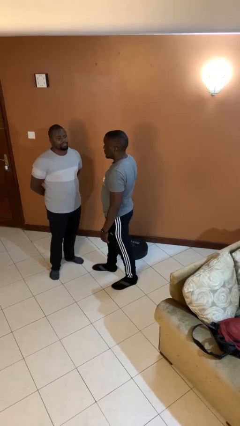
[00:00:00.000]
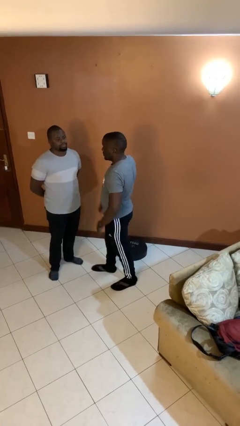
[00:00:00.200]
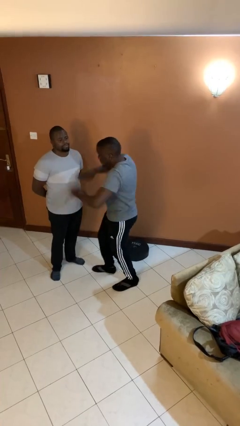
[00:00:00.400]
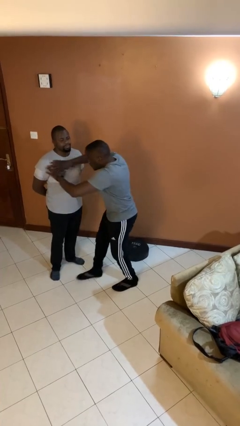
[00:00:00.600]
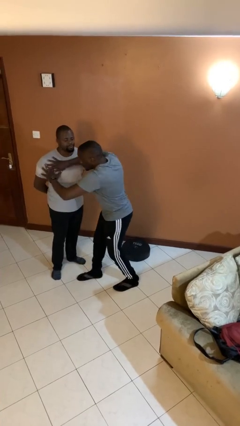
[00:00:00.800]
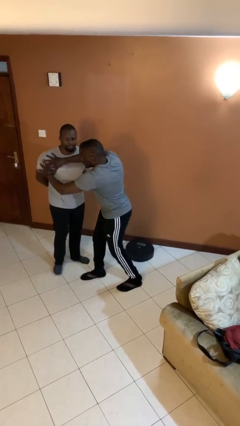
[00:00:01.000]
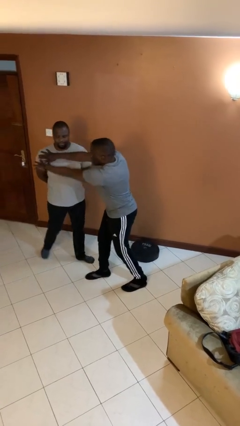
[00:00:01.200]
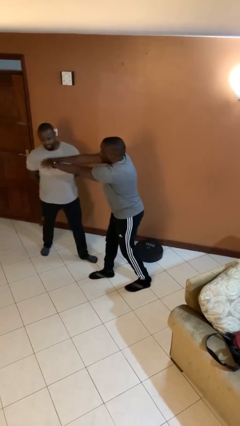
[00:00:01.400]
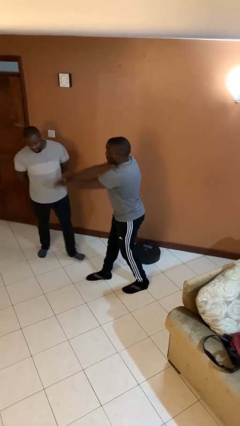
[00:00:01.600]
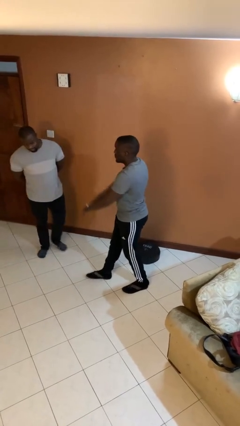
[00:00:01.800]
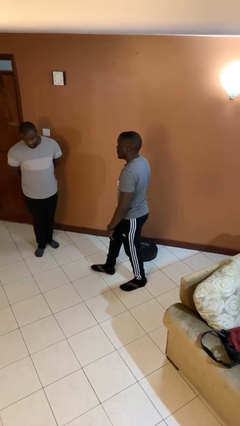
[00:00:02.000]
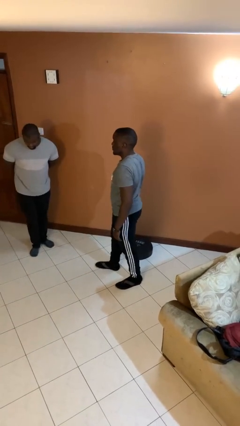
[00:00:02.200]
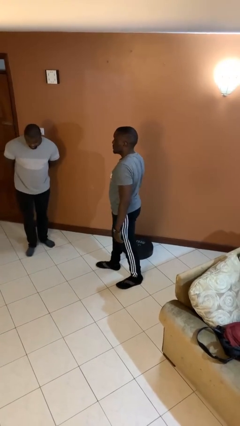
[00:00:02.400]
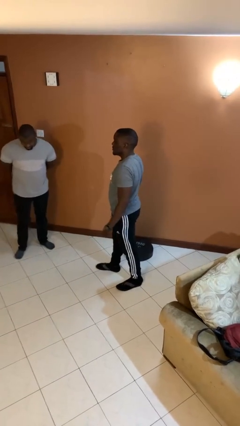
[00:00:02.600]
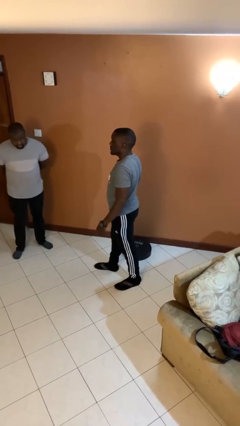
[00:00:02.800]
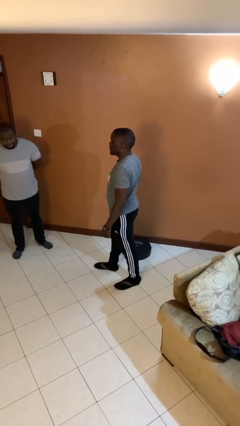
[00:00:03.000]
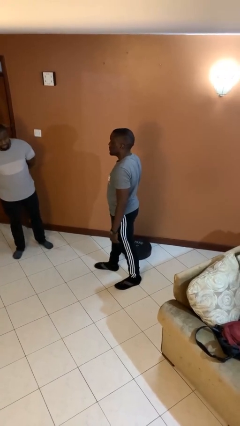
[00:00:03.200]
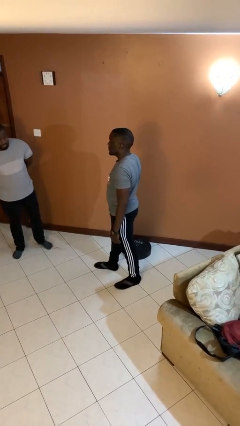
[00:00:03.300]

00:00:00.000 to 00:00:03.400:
person shoves person

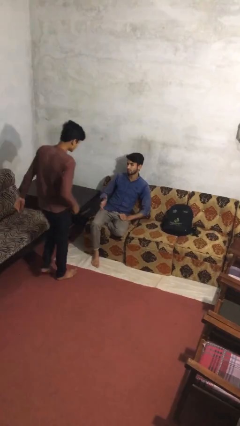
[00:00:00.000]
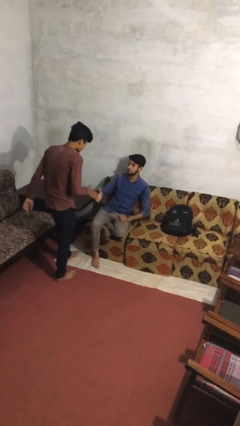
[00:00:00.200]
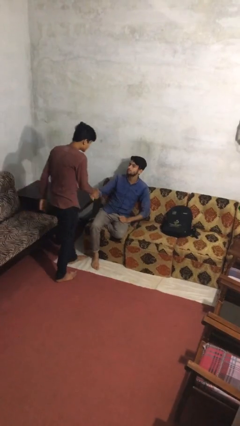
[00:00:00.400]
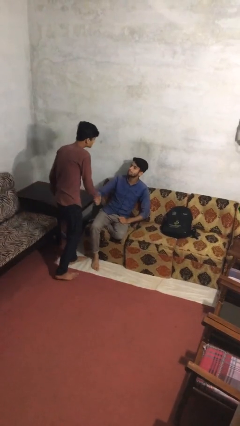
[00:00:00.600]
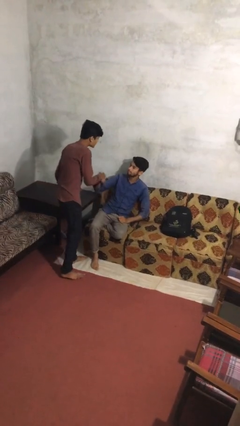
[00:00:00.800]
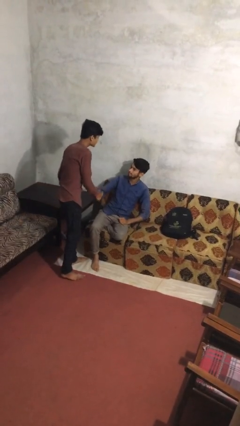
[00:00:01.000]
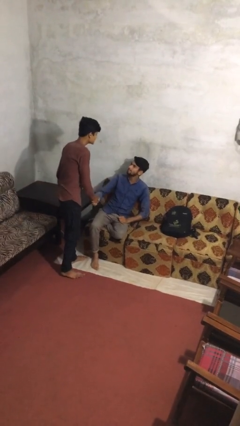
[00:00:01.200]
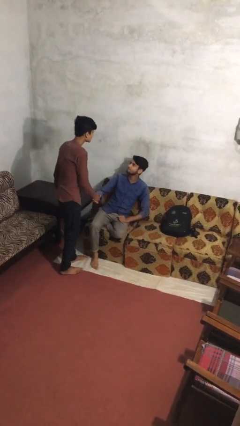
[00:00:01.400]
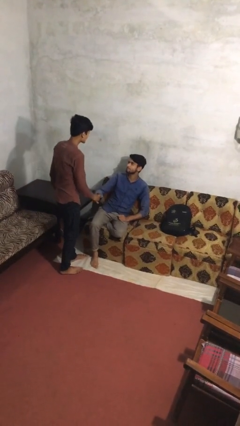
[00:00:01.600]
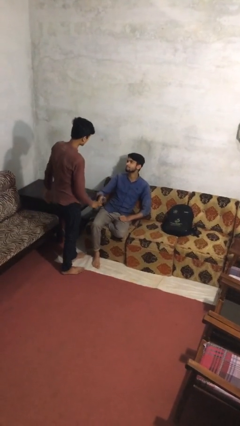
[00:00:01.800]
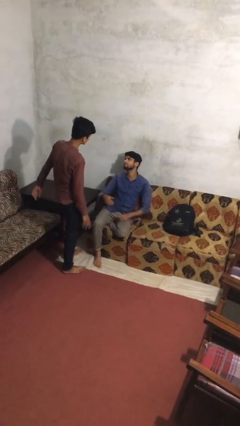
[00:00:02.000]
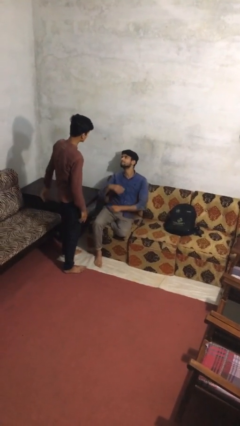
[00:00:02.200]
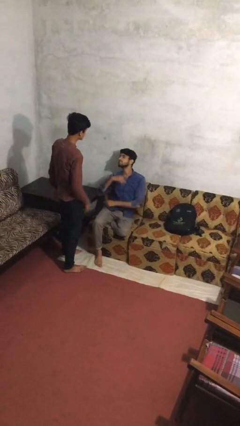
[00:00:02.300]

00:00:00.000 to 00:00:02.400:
person shakes hand

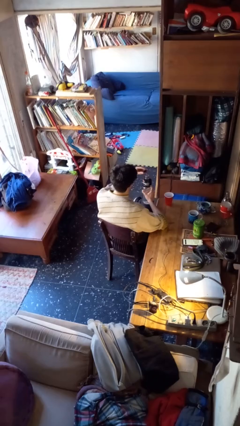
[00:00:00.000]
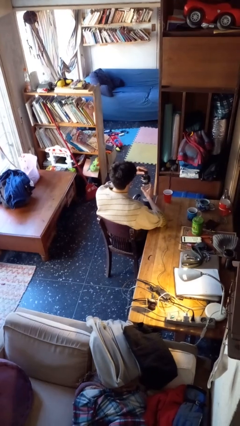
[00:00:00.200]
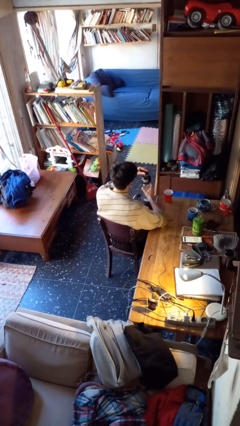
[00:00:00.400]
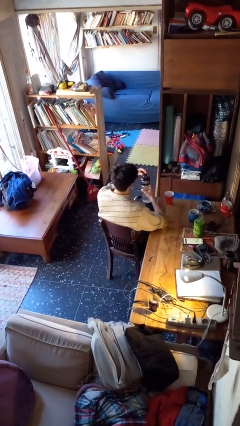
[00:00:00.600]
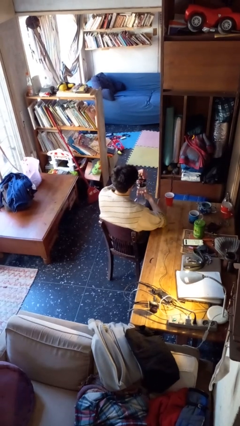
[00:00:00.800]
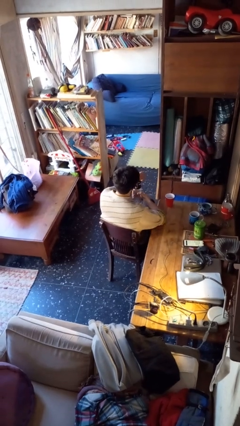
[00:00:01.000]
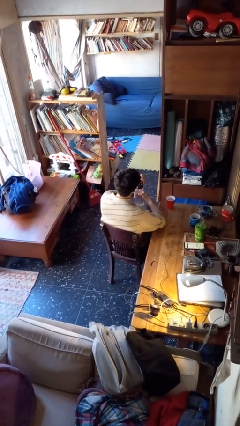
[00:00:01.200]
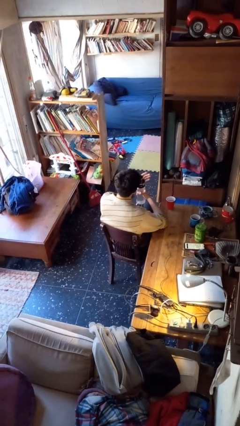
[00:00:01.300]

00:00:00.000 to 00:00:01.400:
person screws lid to bottle

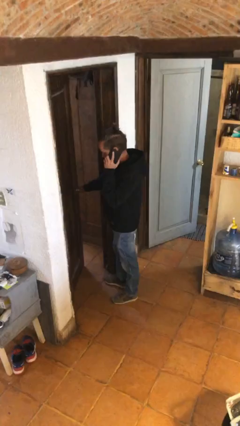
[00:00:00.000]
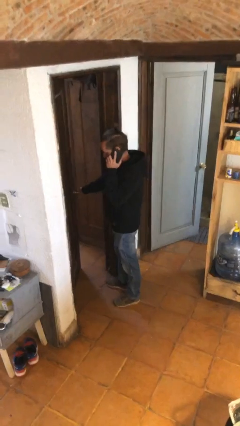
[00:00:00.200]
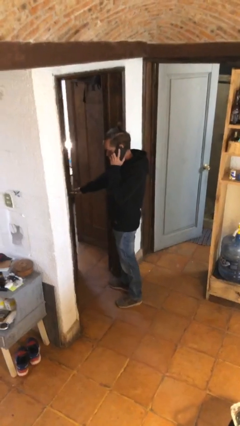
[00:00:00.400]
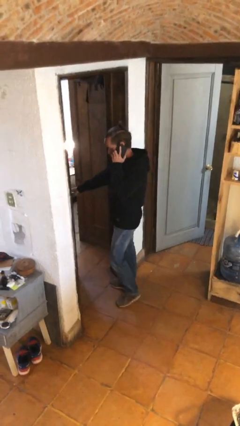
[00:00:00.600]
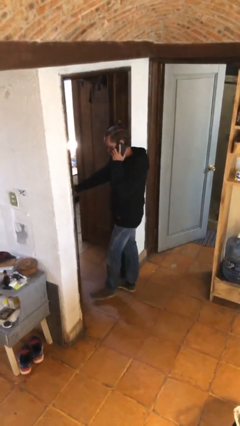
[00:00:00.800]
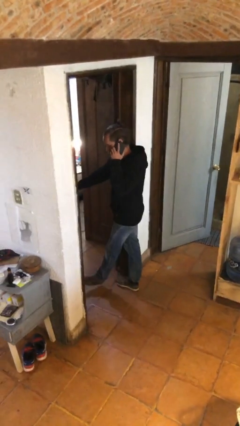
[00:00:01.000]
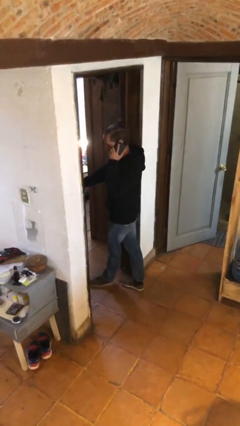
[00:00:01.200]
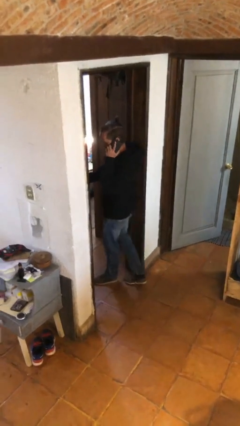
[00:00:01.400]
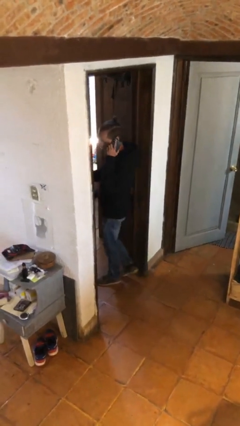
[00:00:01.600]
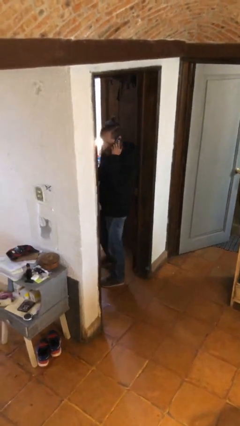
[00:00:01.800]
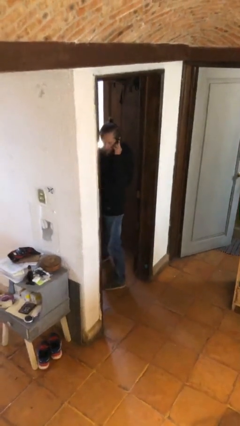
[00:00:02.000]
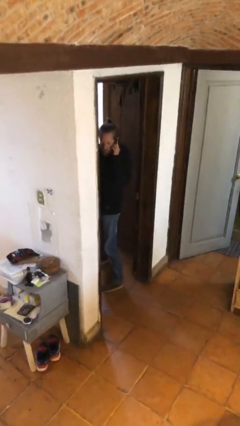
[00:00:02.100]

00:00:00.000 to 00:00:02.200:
person exits scene through structure

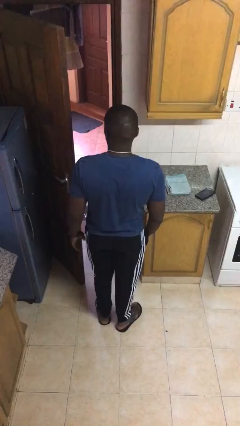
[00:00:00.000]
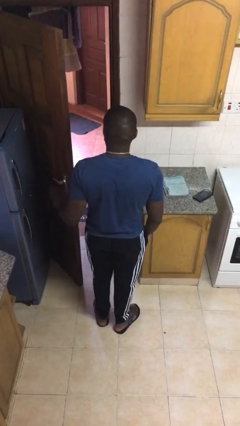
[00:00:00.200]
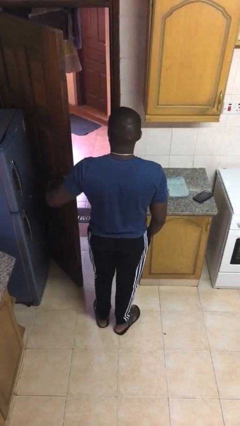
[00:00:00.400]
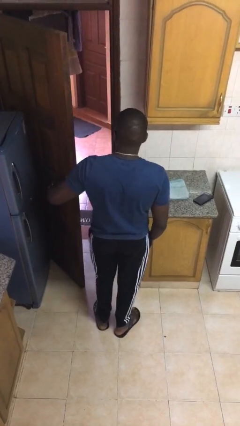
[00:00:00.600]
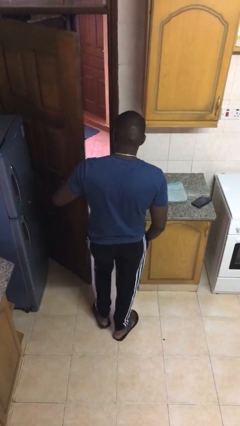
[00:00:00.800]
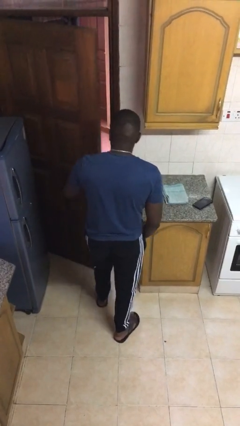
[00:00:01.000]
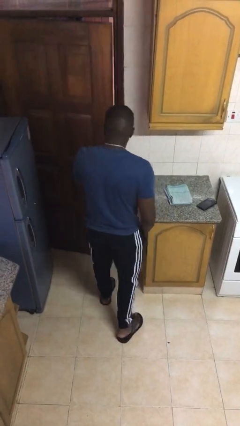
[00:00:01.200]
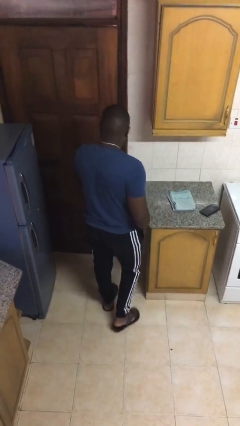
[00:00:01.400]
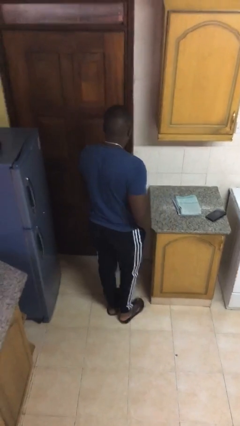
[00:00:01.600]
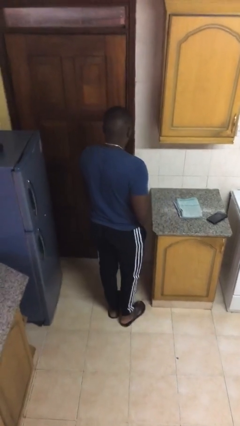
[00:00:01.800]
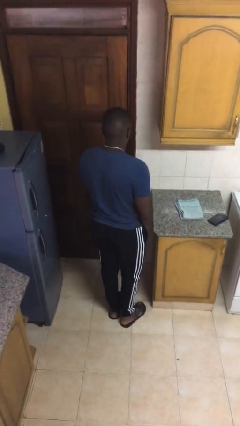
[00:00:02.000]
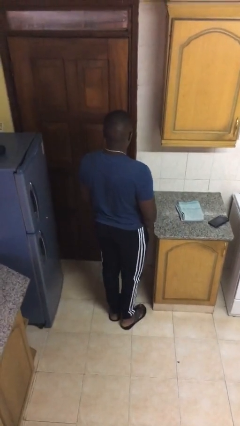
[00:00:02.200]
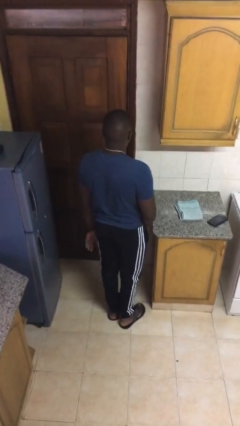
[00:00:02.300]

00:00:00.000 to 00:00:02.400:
person closes facility door

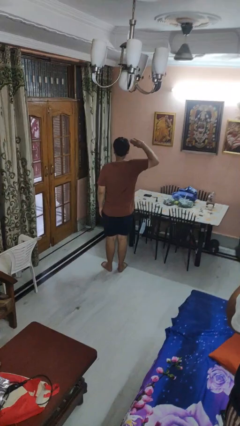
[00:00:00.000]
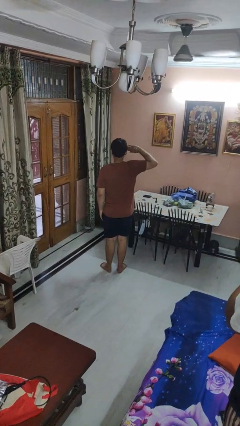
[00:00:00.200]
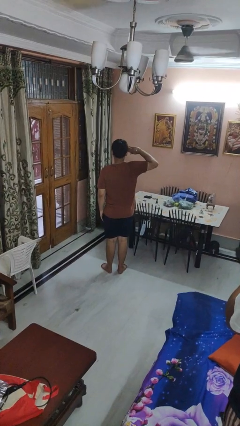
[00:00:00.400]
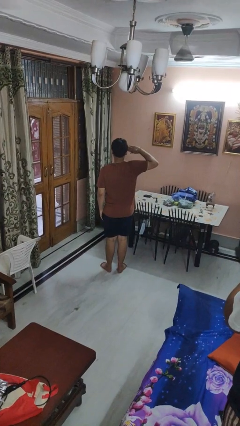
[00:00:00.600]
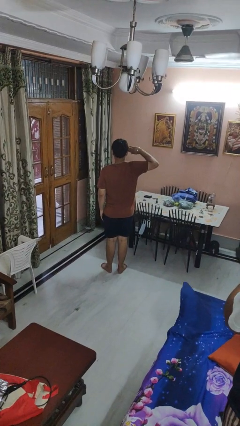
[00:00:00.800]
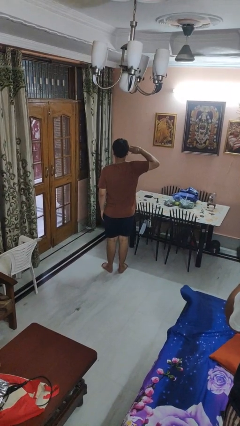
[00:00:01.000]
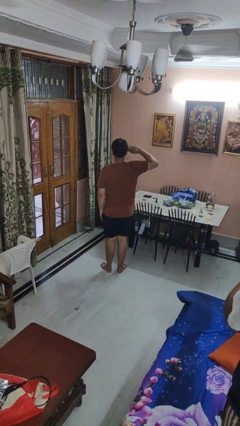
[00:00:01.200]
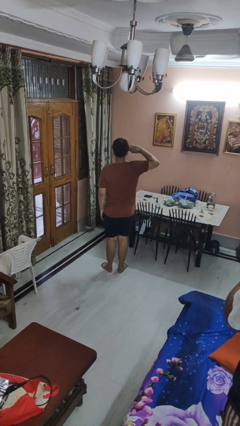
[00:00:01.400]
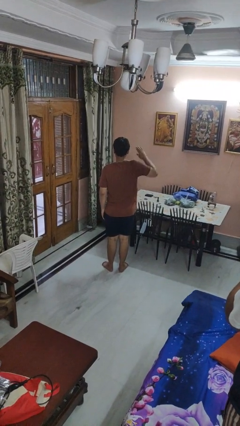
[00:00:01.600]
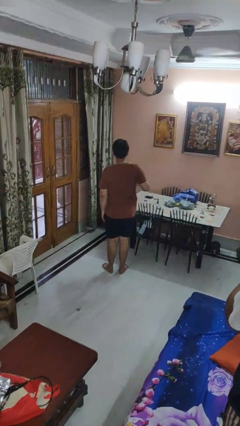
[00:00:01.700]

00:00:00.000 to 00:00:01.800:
person salutes

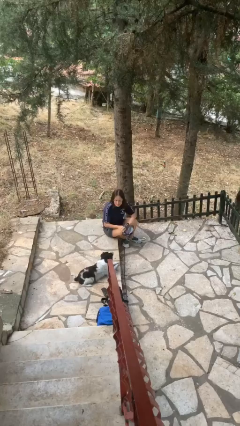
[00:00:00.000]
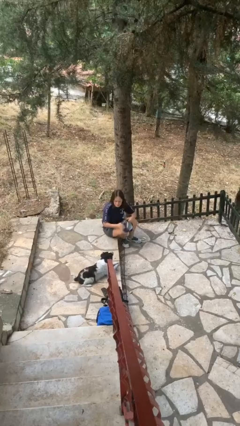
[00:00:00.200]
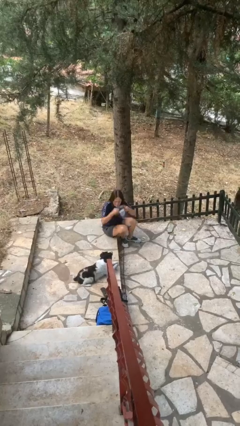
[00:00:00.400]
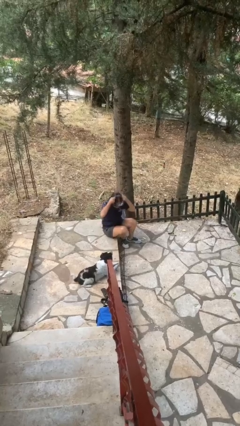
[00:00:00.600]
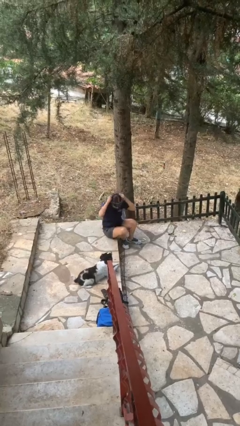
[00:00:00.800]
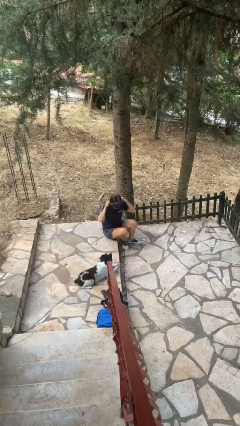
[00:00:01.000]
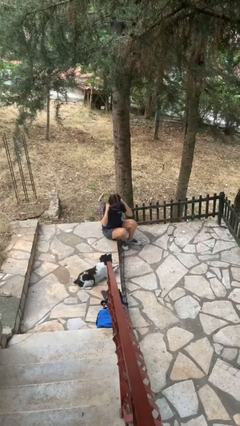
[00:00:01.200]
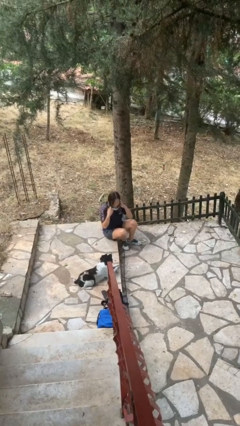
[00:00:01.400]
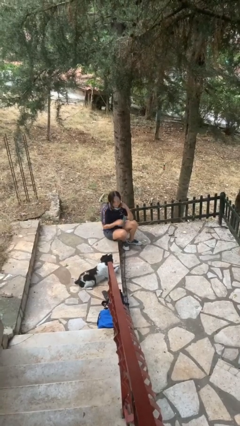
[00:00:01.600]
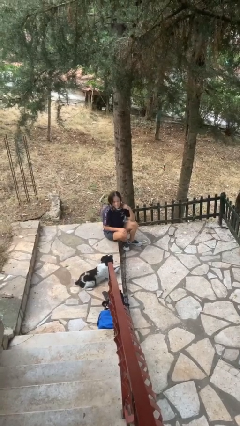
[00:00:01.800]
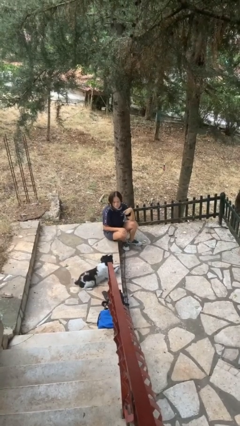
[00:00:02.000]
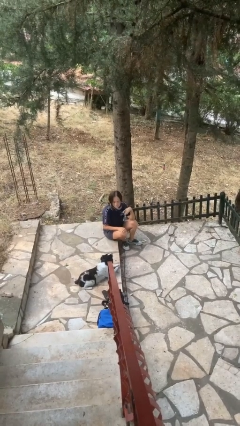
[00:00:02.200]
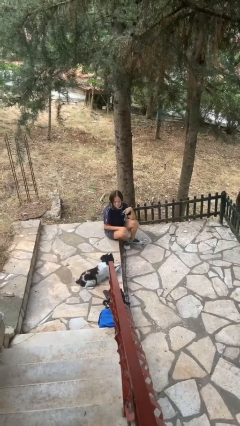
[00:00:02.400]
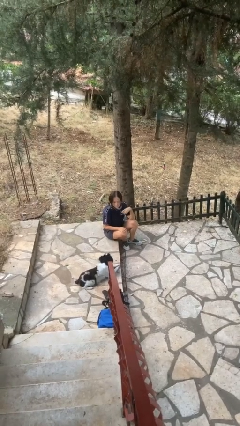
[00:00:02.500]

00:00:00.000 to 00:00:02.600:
person puts on scarf

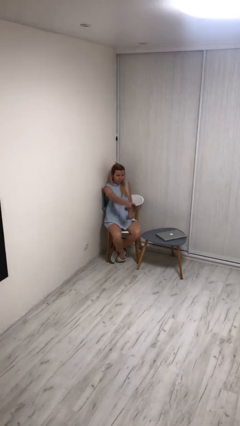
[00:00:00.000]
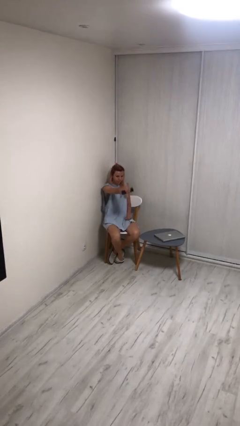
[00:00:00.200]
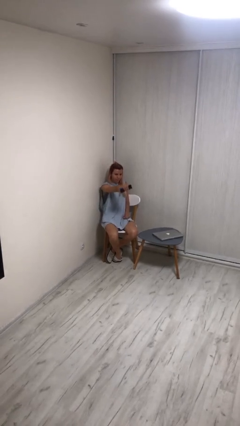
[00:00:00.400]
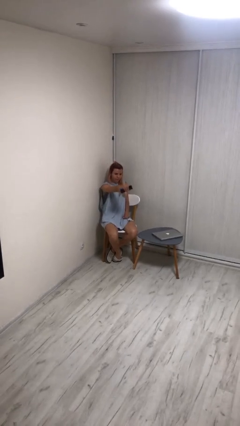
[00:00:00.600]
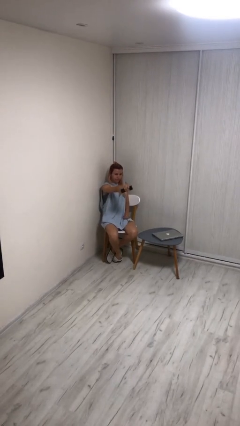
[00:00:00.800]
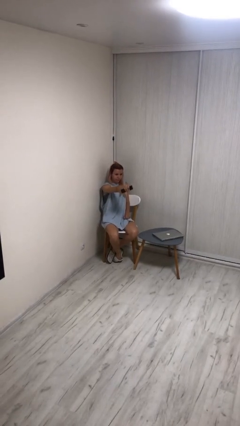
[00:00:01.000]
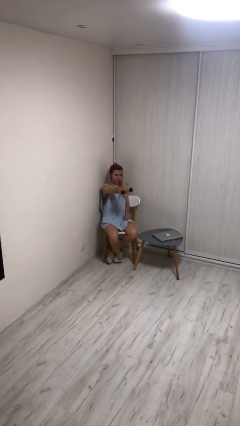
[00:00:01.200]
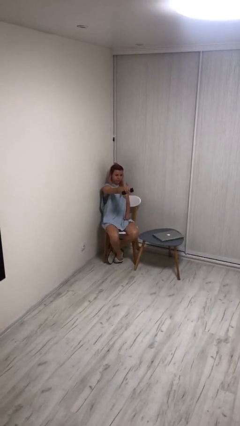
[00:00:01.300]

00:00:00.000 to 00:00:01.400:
person uses television remote
